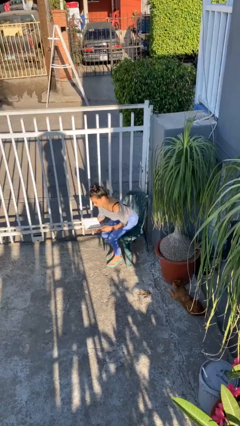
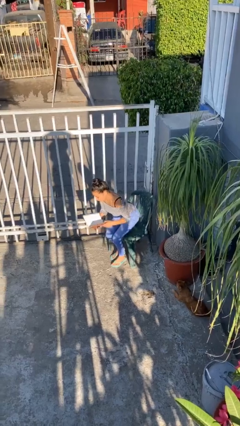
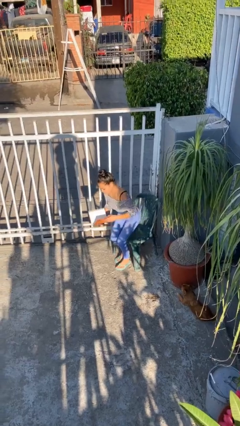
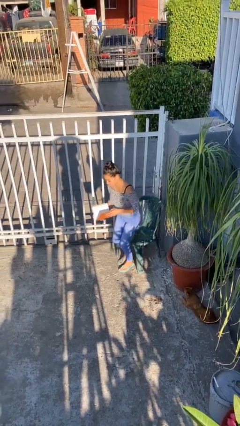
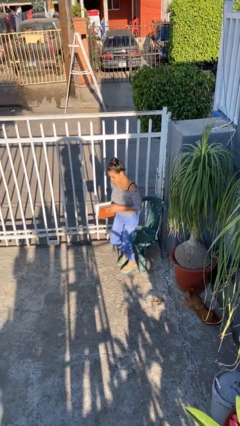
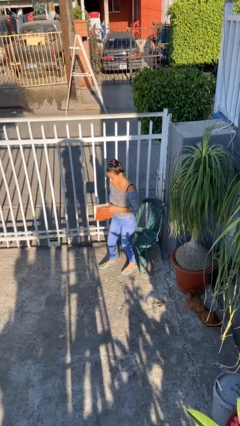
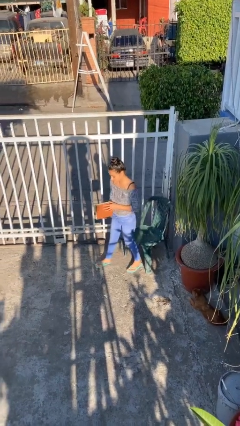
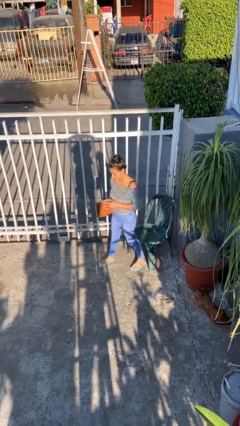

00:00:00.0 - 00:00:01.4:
person stands up

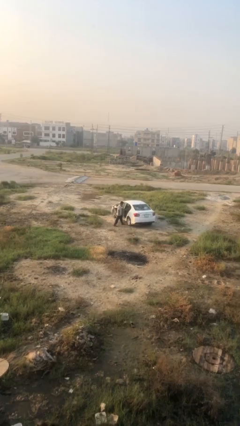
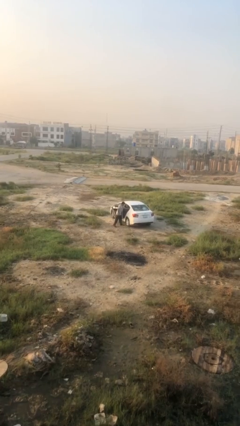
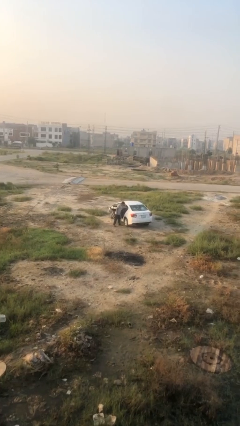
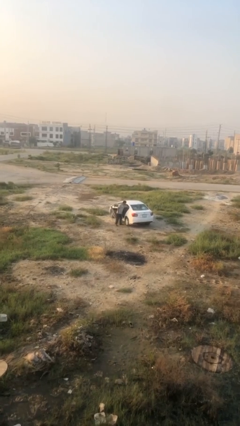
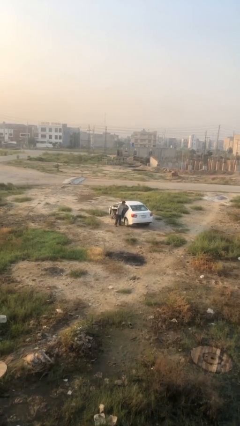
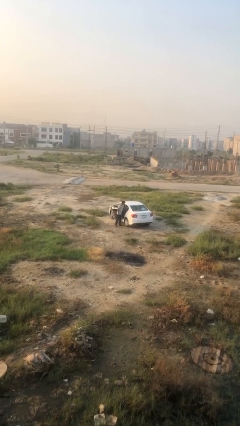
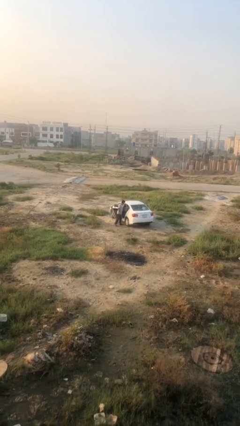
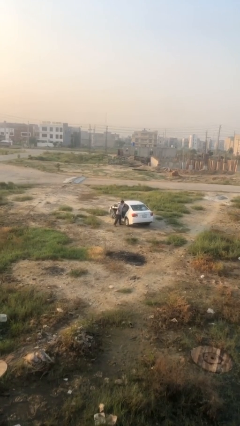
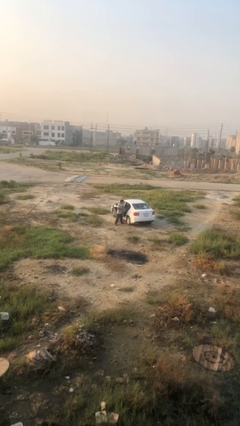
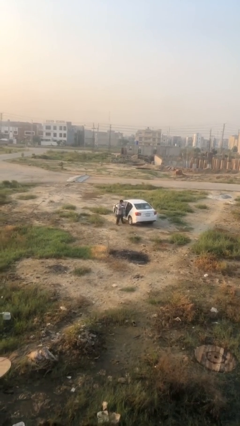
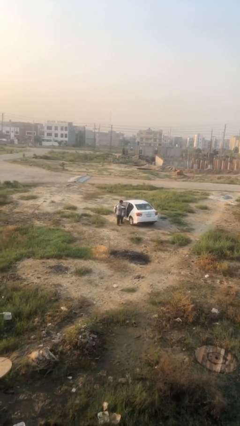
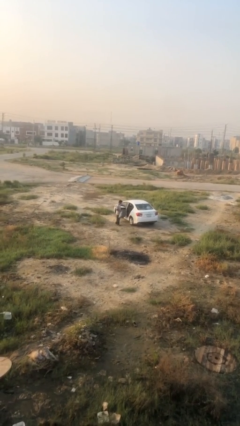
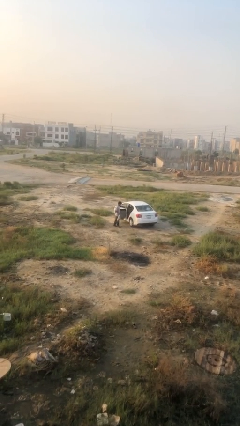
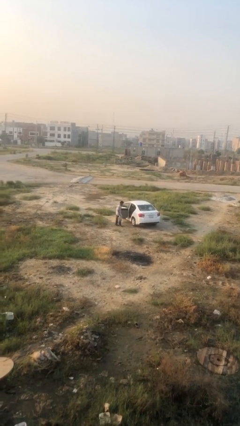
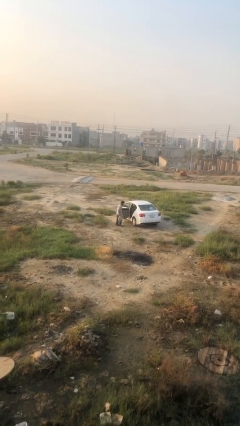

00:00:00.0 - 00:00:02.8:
person unloads car

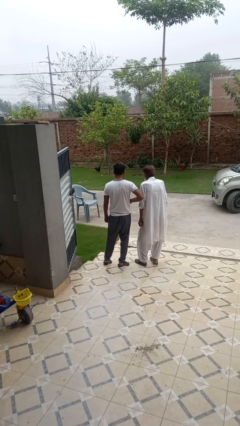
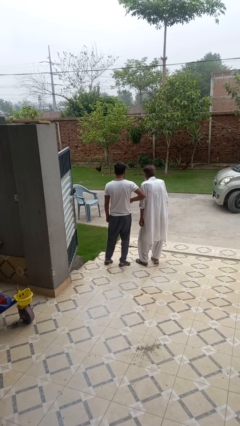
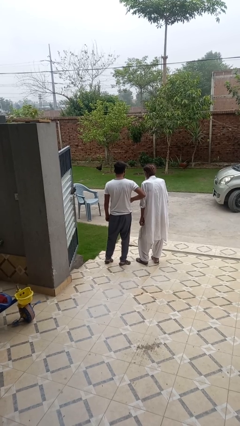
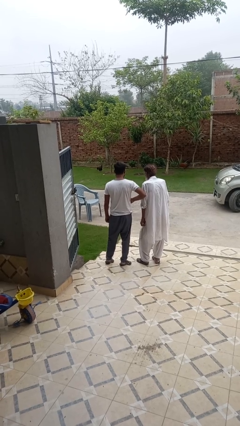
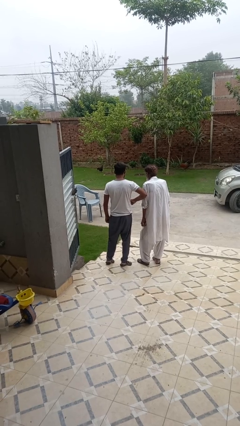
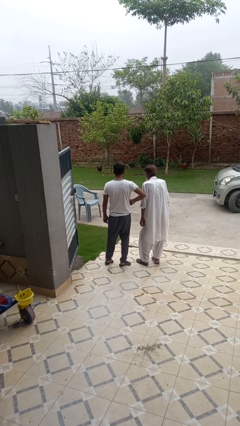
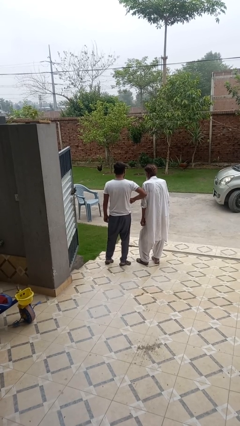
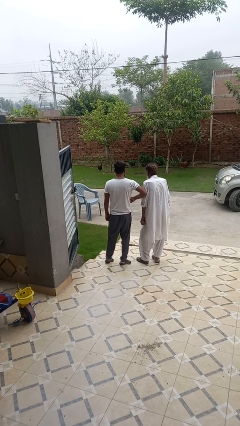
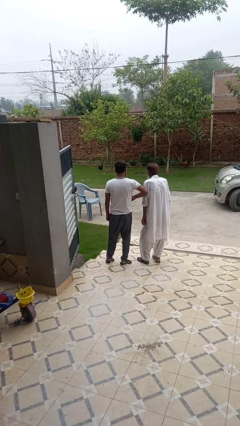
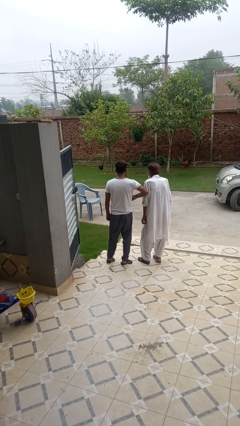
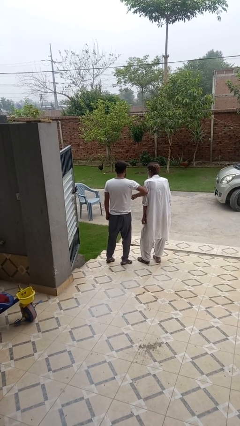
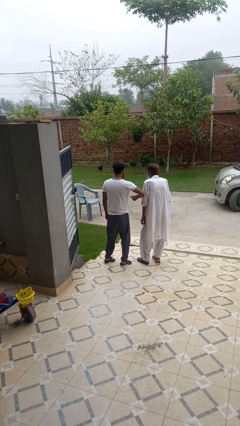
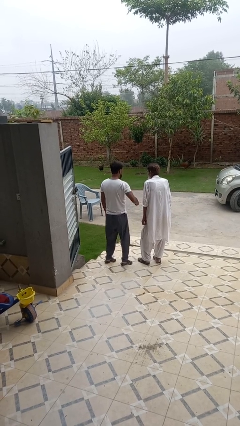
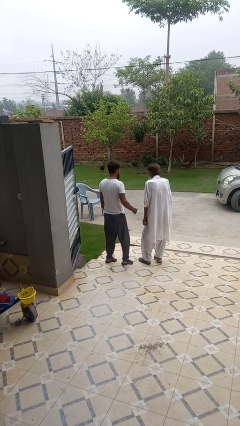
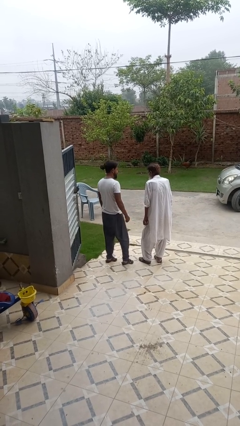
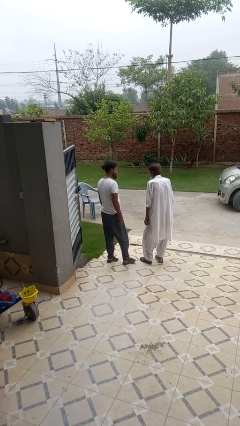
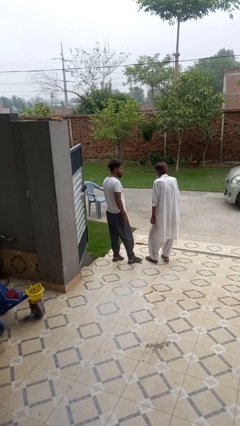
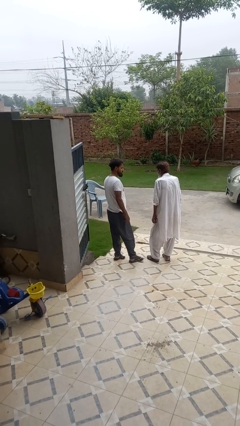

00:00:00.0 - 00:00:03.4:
person nudges person with elbow

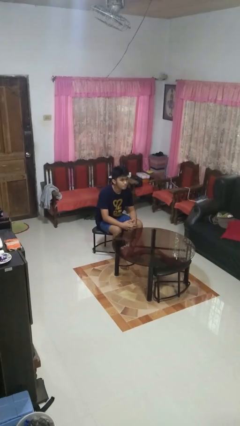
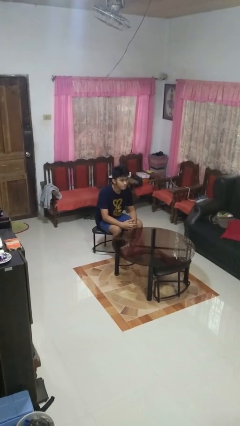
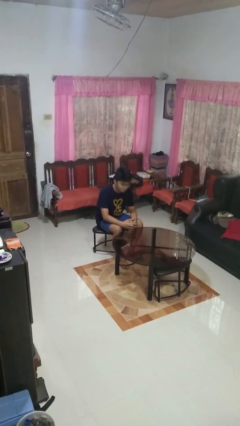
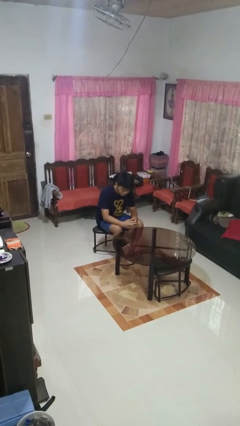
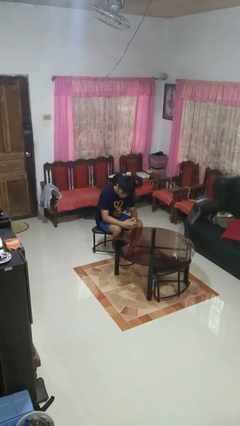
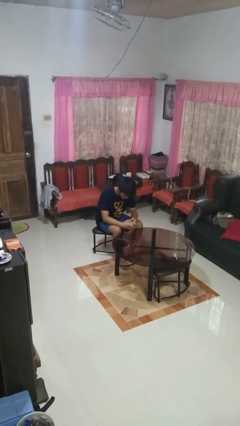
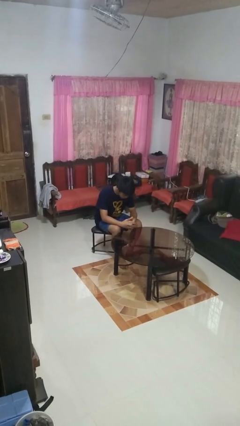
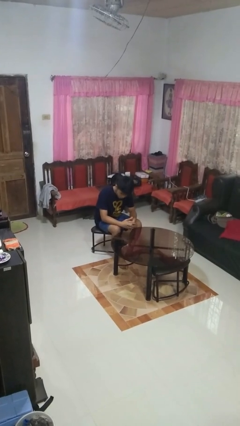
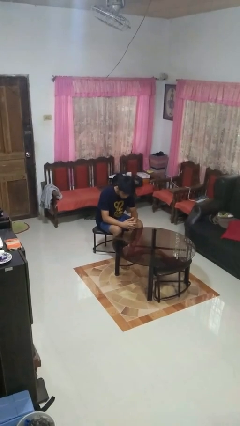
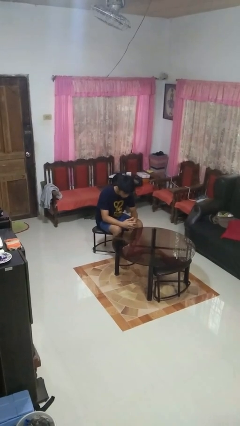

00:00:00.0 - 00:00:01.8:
person shakes head

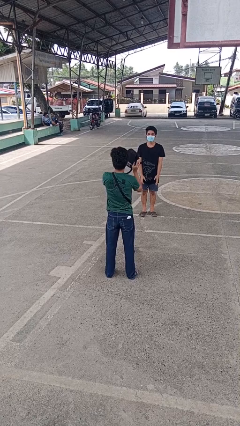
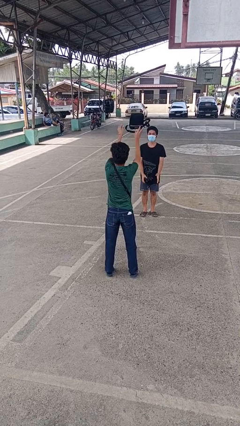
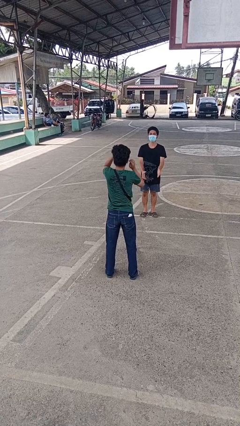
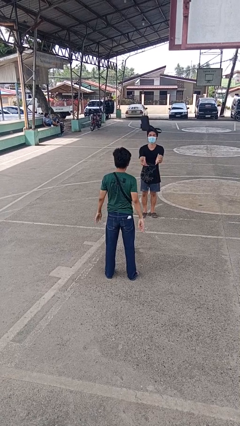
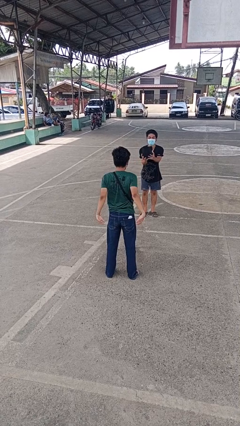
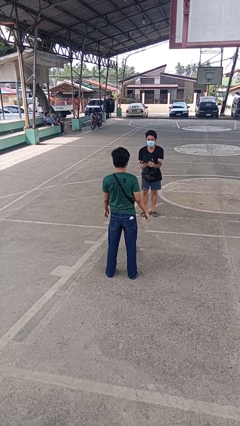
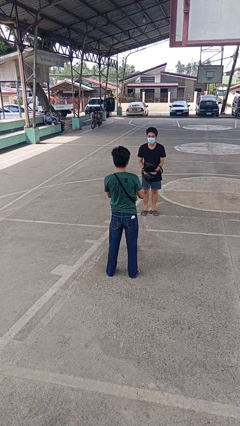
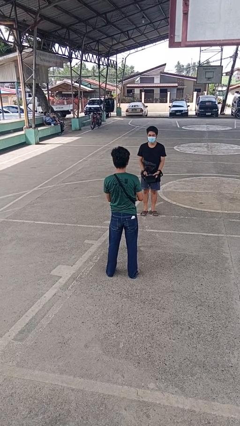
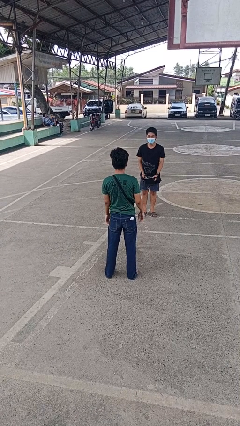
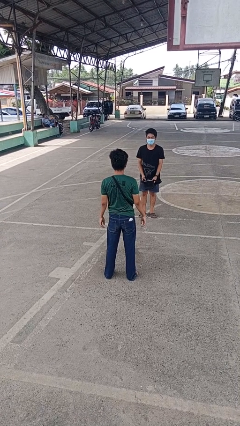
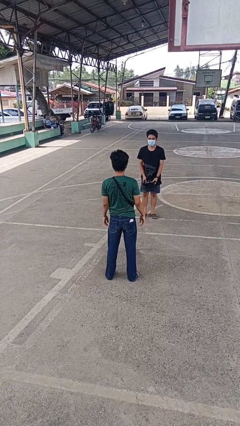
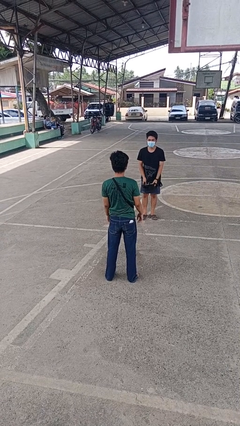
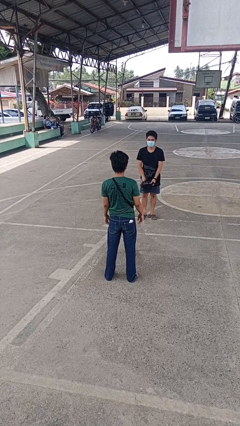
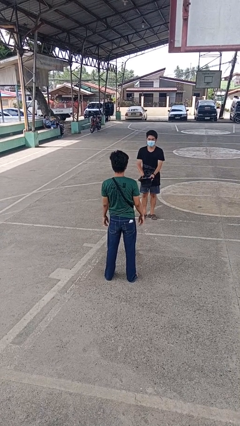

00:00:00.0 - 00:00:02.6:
person throws object to person

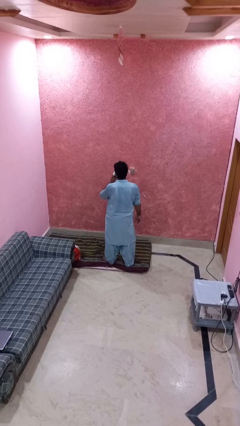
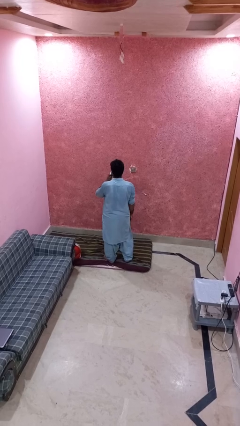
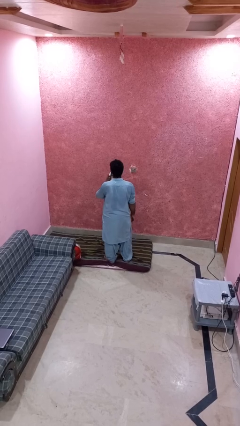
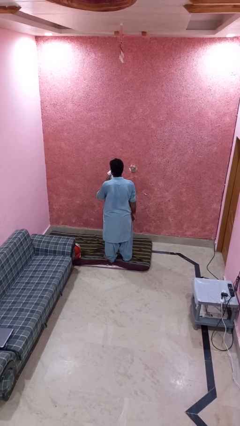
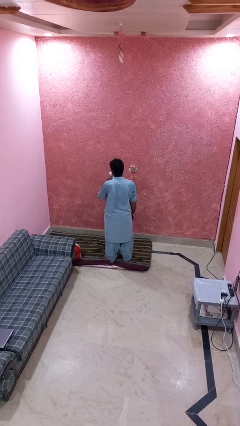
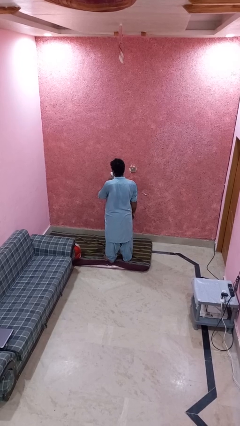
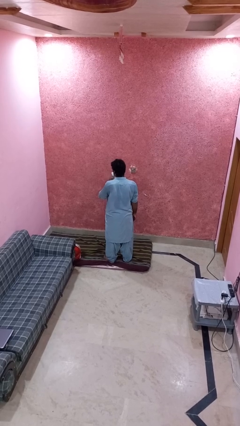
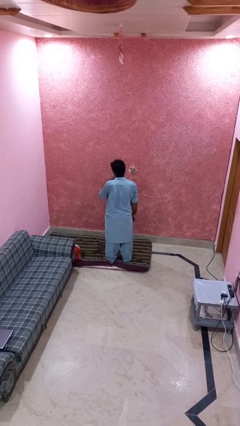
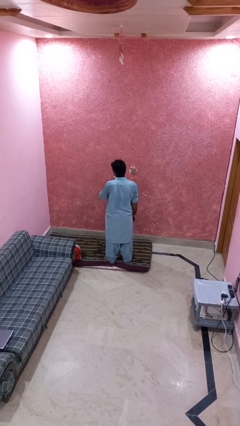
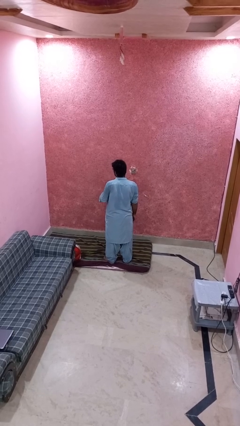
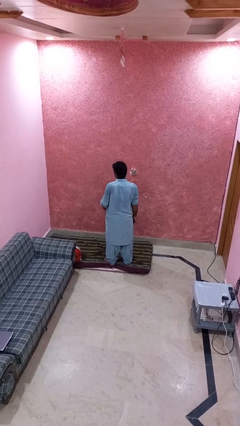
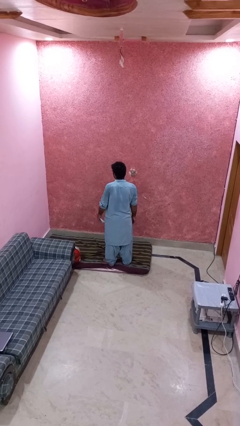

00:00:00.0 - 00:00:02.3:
person wipes mouth with napkin

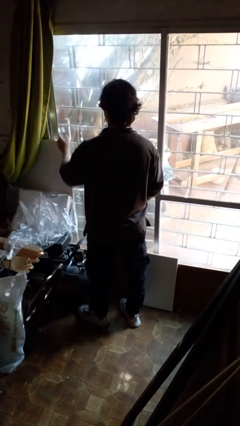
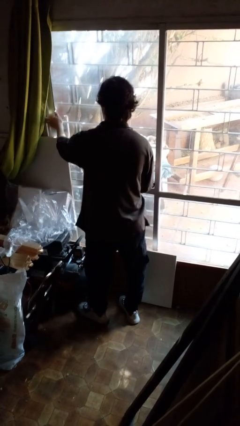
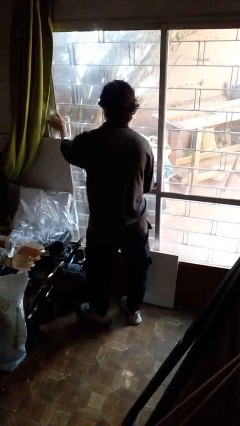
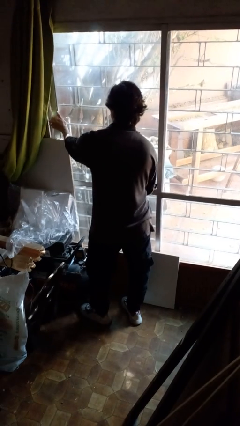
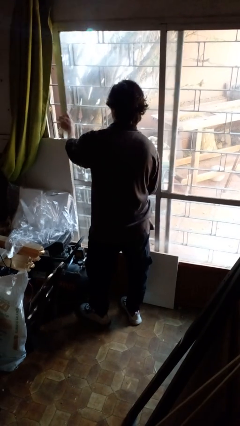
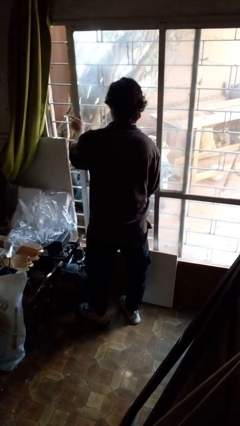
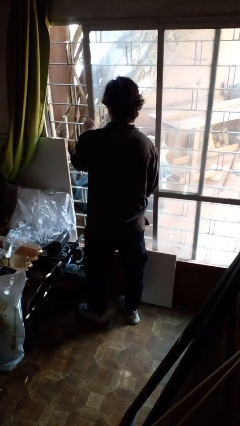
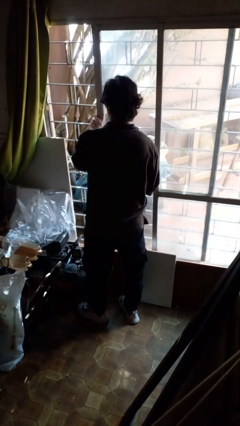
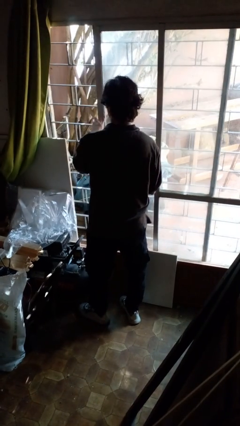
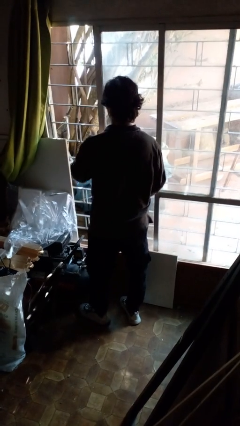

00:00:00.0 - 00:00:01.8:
person opens sliding door

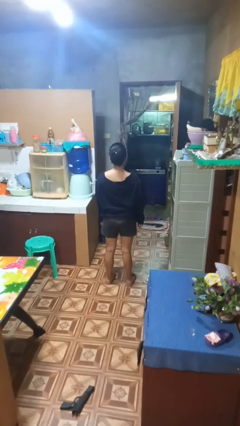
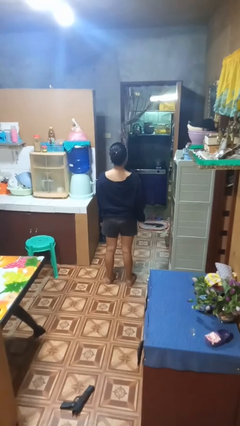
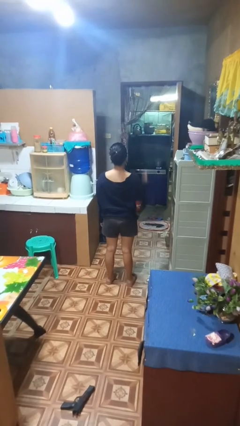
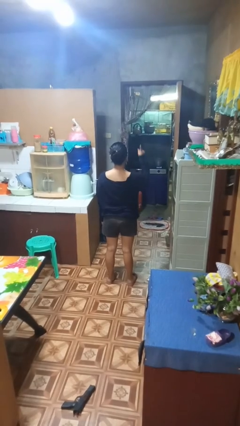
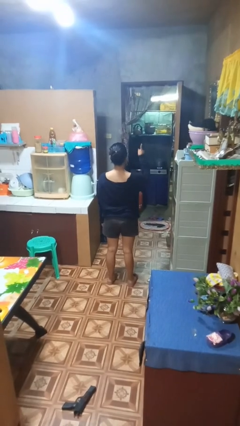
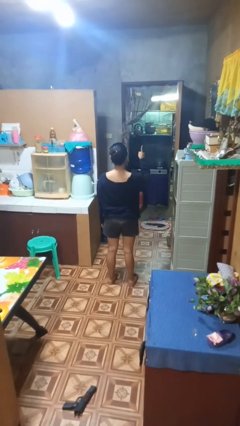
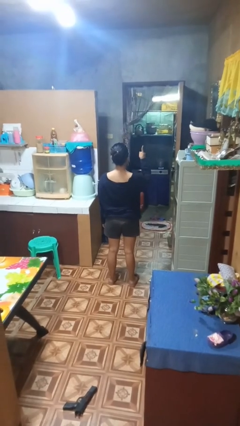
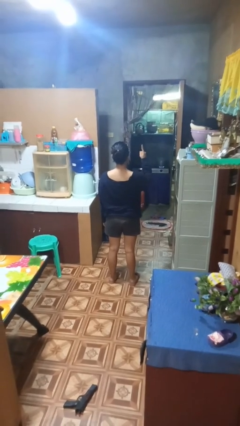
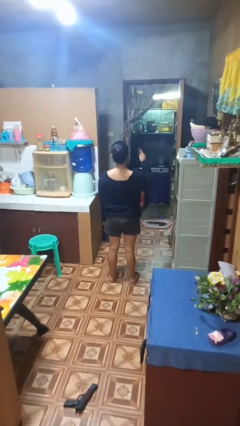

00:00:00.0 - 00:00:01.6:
person gestures number one
